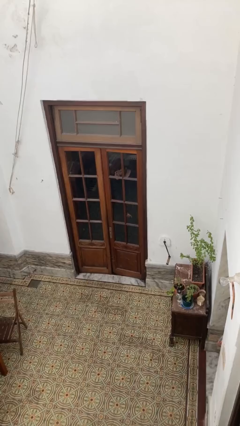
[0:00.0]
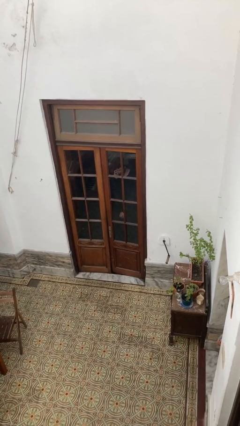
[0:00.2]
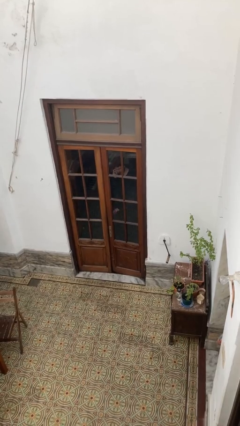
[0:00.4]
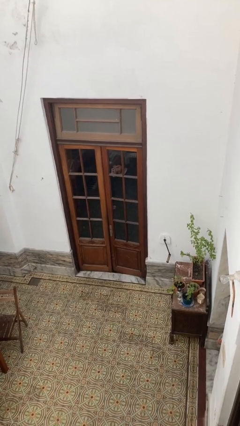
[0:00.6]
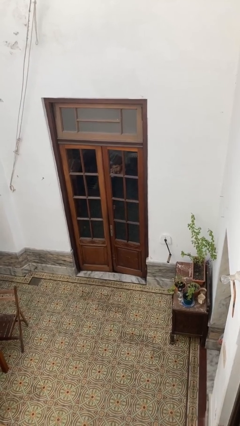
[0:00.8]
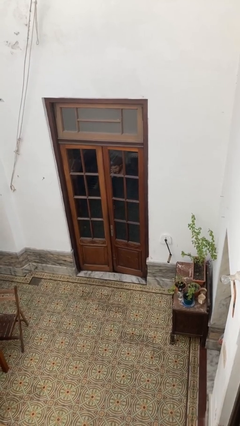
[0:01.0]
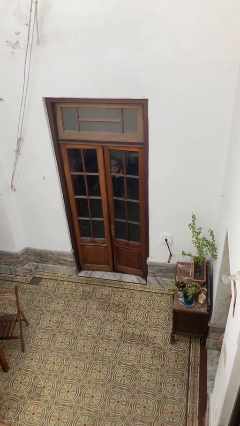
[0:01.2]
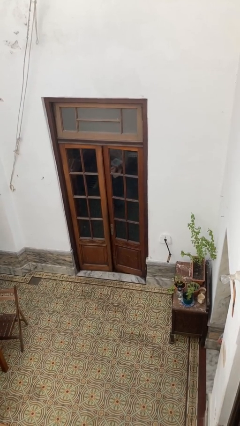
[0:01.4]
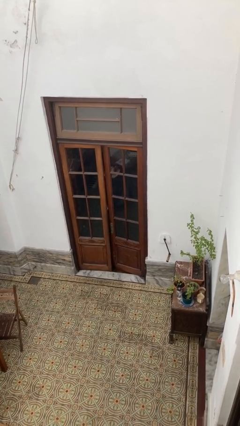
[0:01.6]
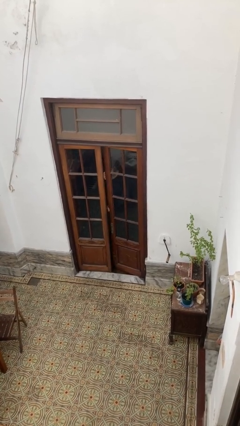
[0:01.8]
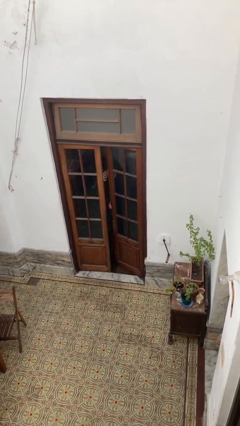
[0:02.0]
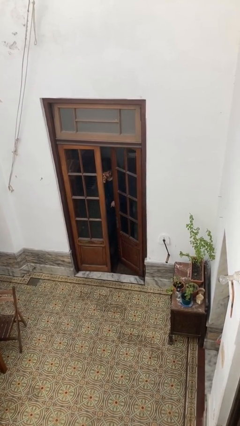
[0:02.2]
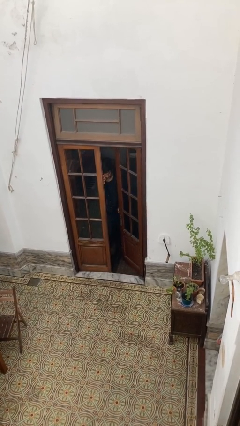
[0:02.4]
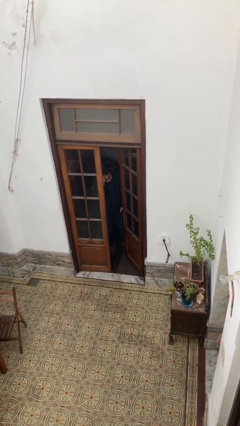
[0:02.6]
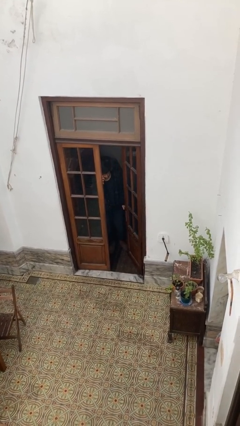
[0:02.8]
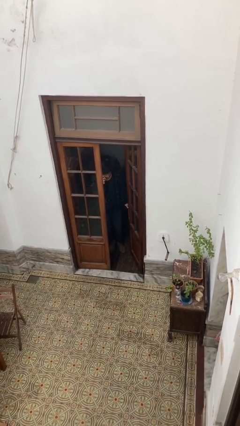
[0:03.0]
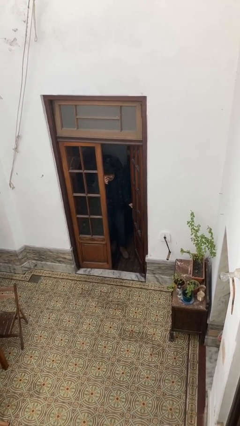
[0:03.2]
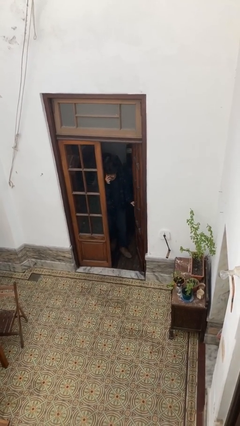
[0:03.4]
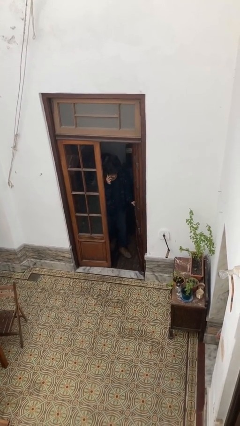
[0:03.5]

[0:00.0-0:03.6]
person opens facility door

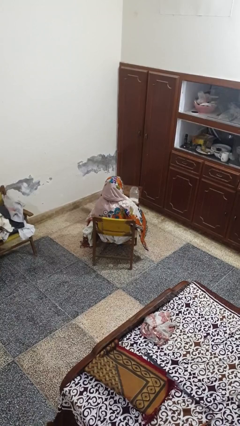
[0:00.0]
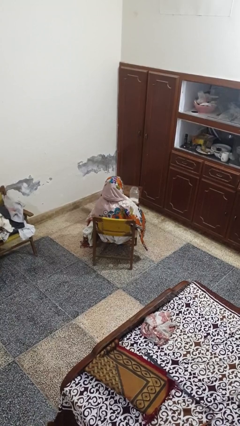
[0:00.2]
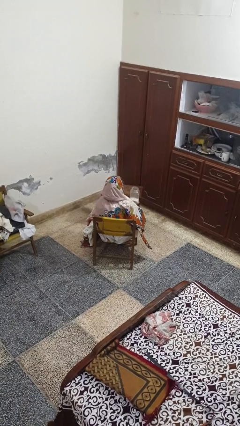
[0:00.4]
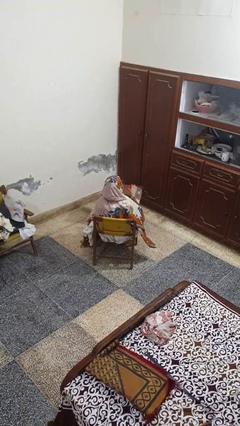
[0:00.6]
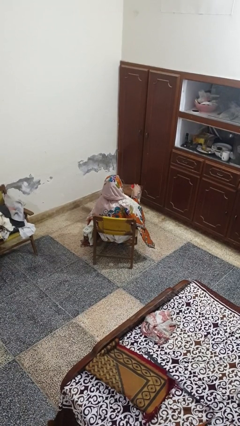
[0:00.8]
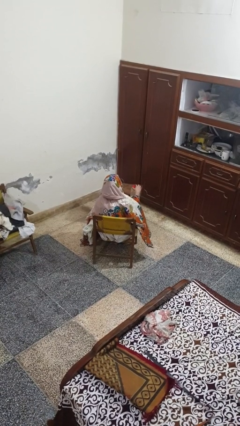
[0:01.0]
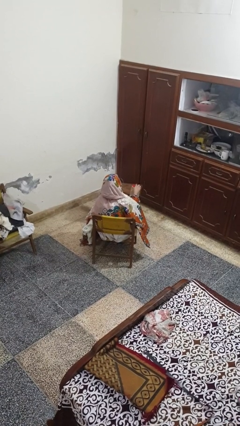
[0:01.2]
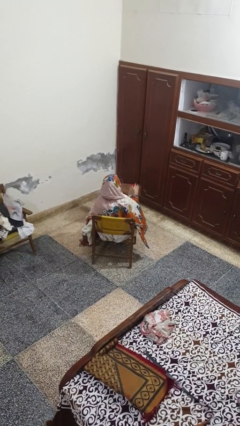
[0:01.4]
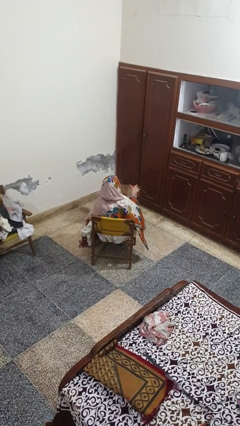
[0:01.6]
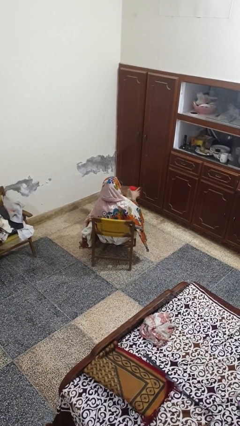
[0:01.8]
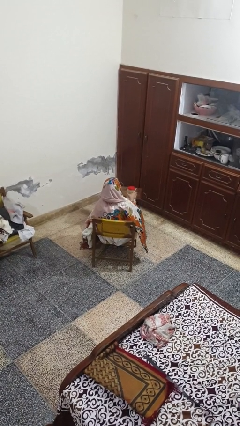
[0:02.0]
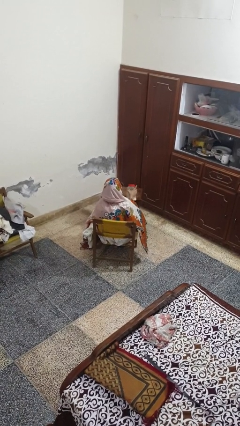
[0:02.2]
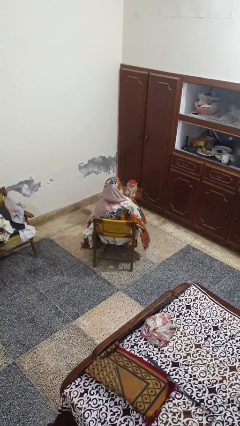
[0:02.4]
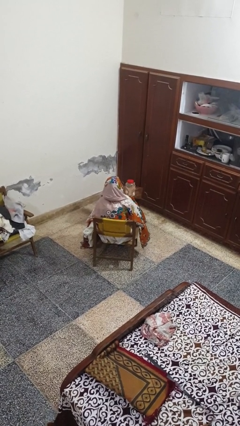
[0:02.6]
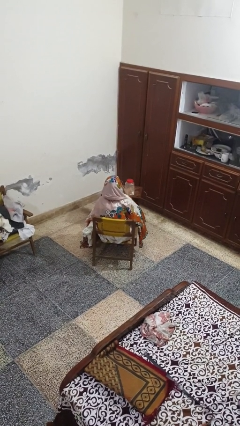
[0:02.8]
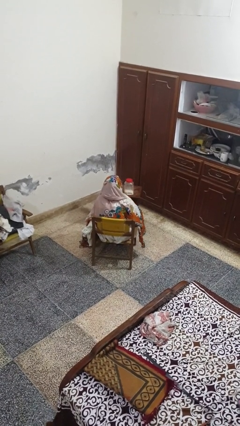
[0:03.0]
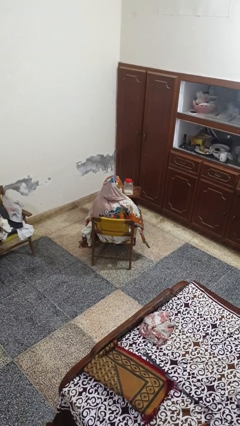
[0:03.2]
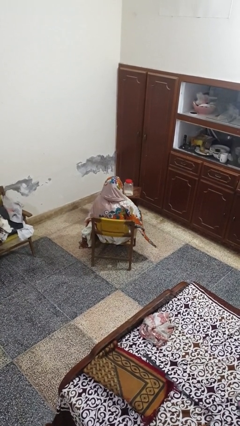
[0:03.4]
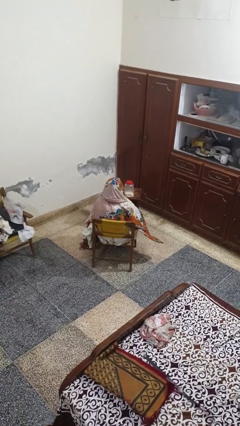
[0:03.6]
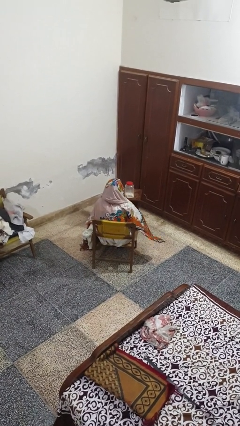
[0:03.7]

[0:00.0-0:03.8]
person closes jar

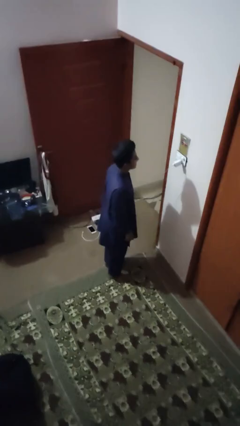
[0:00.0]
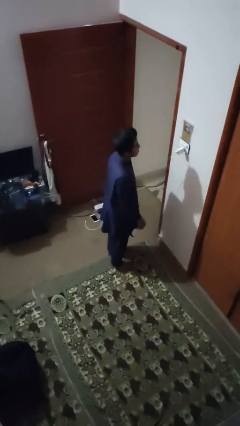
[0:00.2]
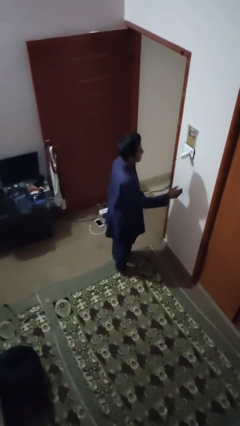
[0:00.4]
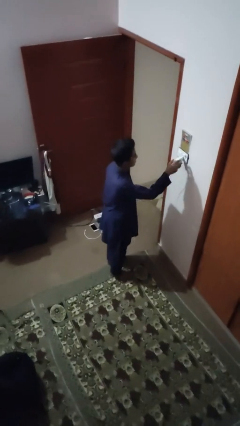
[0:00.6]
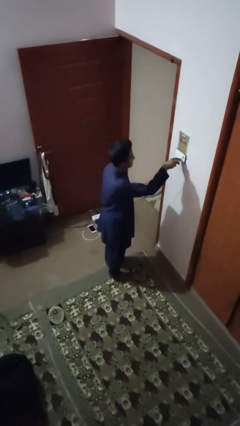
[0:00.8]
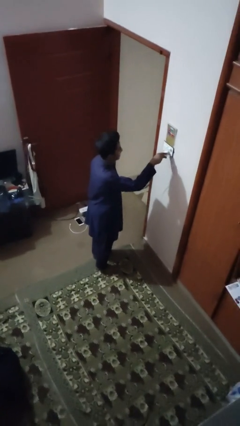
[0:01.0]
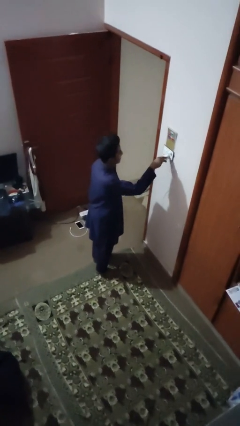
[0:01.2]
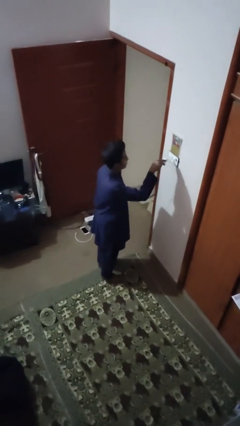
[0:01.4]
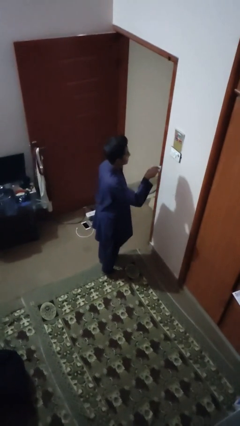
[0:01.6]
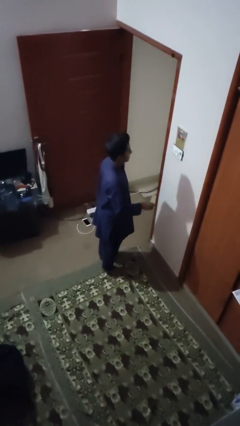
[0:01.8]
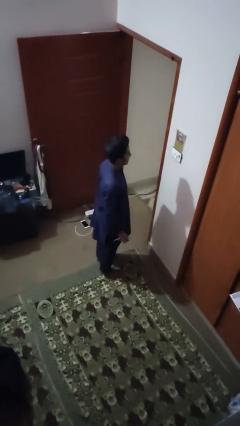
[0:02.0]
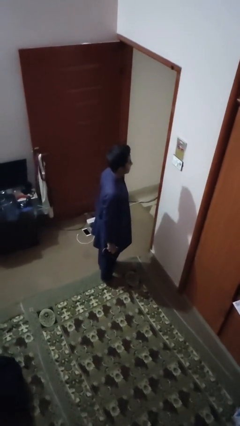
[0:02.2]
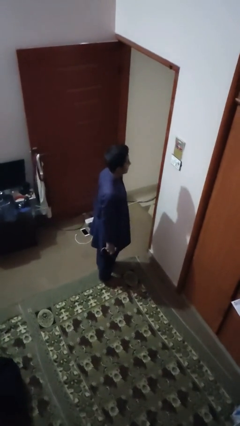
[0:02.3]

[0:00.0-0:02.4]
person unplugs from electrical socket

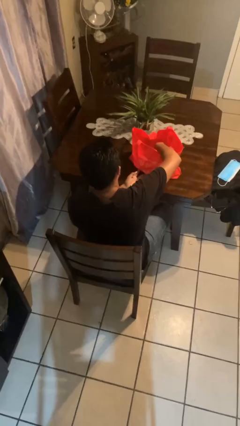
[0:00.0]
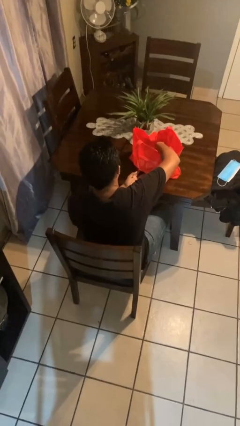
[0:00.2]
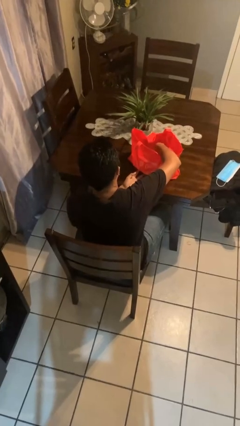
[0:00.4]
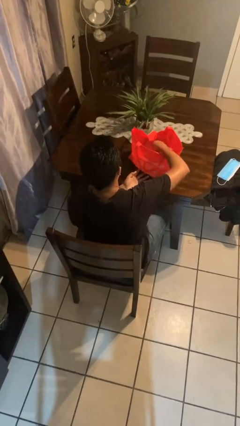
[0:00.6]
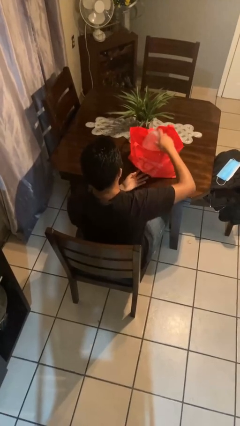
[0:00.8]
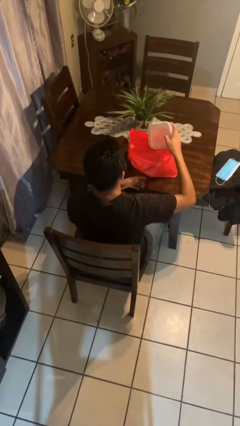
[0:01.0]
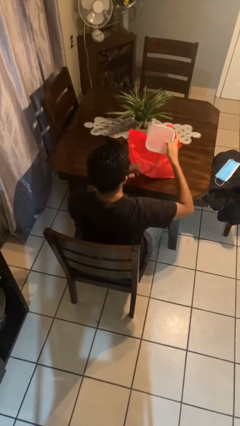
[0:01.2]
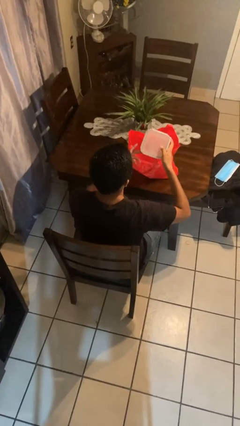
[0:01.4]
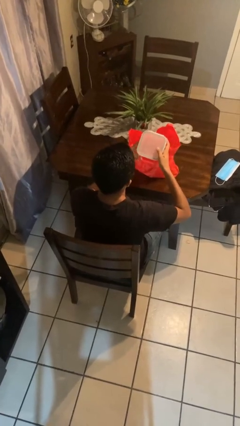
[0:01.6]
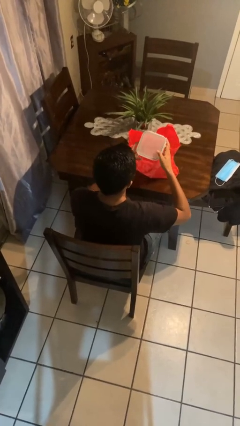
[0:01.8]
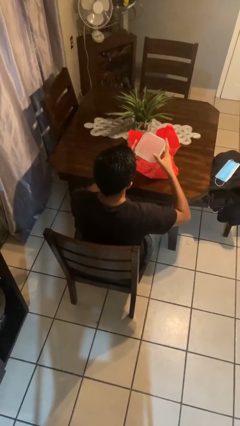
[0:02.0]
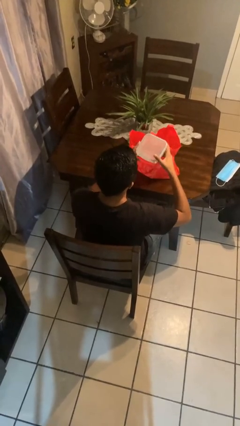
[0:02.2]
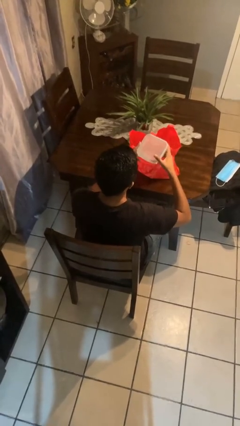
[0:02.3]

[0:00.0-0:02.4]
person takes object from bag

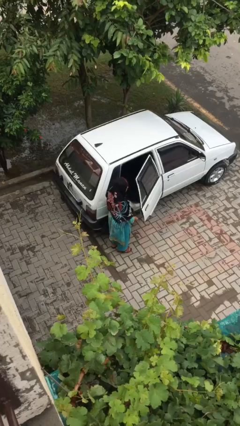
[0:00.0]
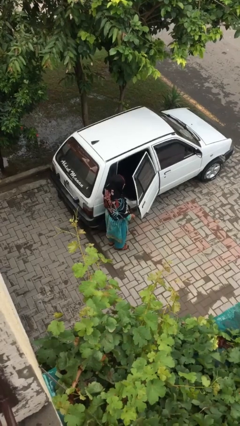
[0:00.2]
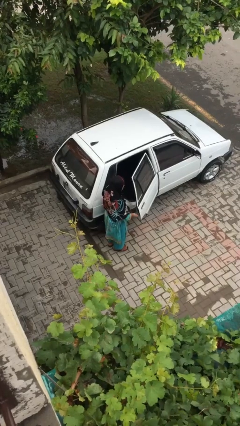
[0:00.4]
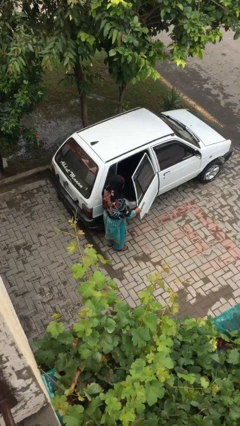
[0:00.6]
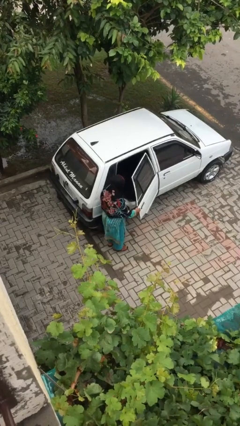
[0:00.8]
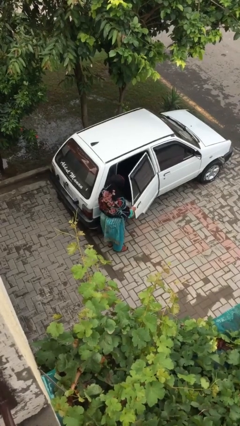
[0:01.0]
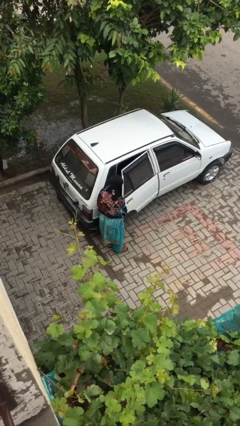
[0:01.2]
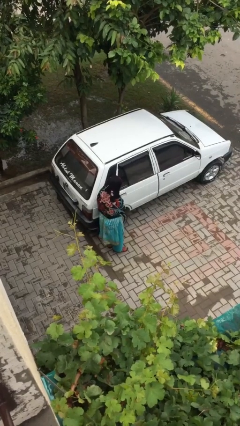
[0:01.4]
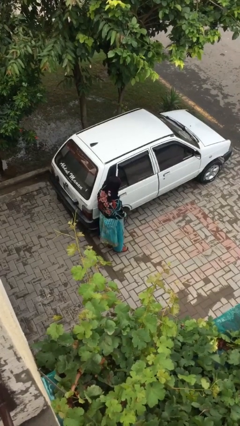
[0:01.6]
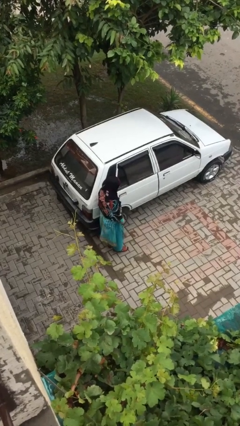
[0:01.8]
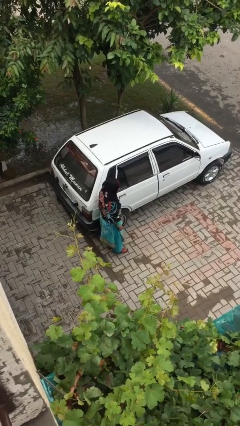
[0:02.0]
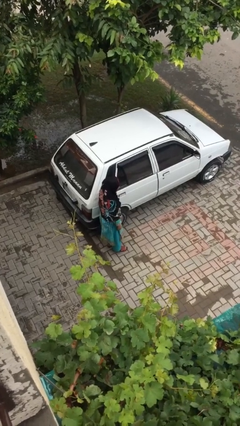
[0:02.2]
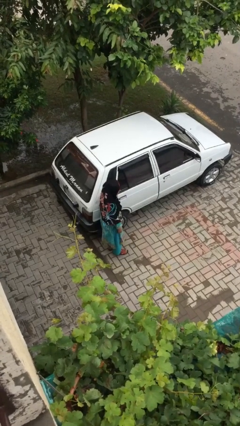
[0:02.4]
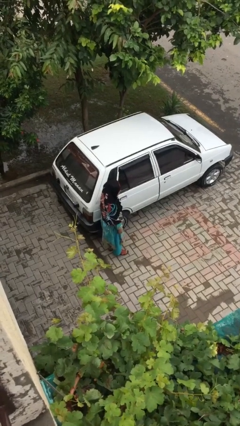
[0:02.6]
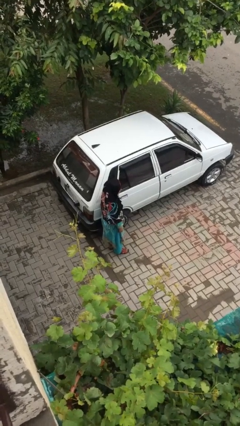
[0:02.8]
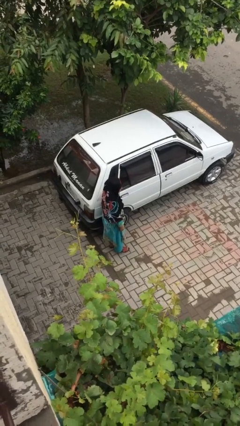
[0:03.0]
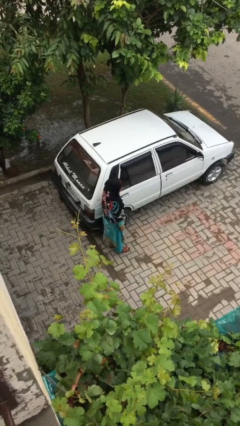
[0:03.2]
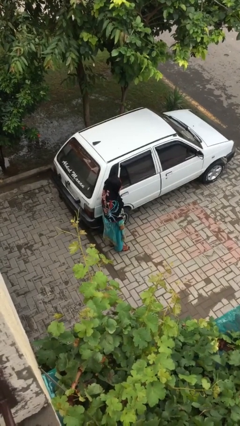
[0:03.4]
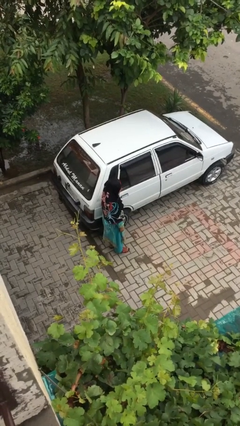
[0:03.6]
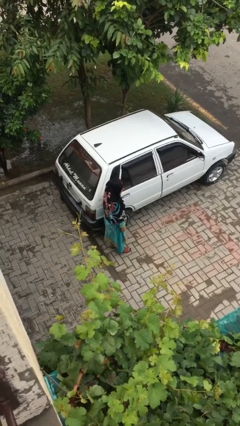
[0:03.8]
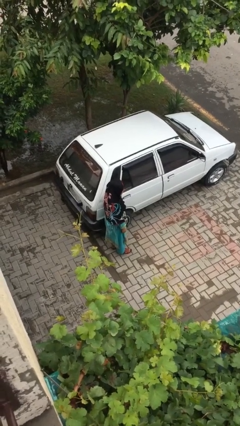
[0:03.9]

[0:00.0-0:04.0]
person closes car door

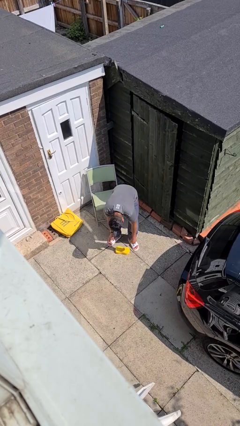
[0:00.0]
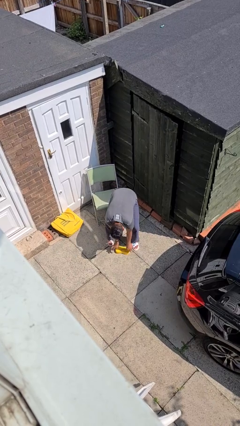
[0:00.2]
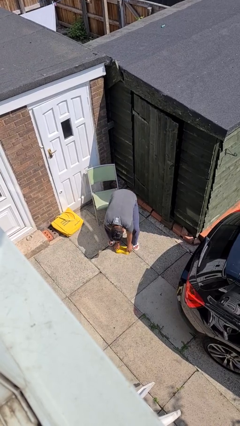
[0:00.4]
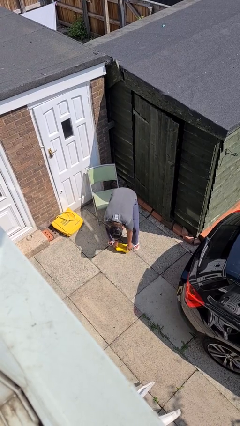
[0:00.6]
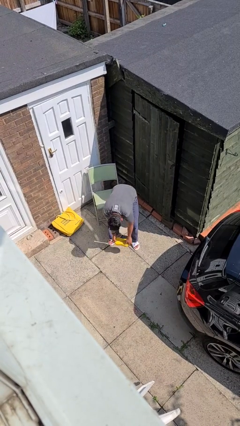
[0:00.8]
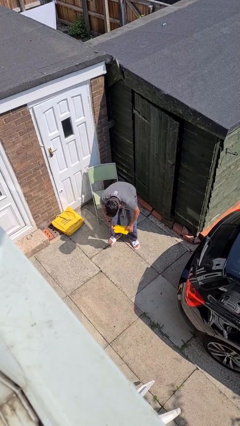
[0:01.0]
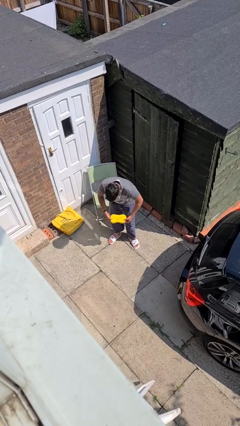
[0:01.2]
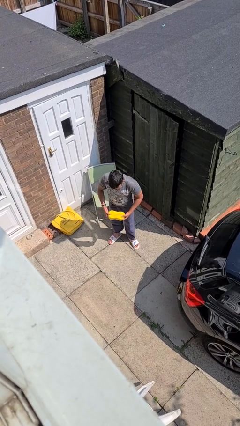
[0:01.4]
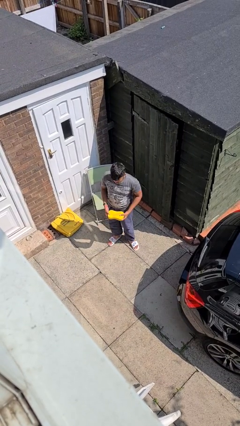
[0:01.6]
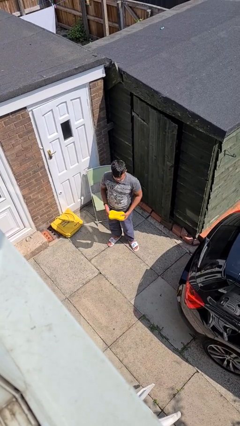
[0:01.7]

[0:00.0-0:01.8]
person picks up object from floor
